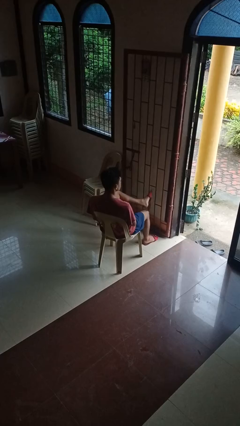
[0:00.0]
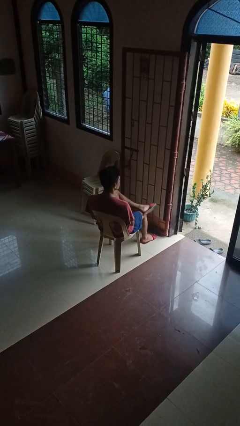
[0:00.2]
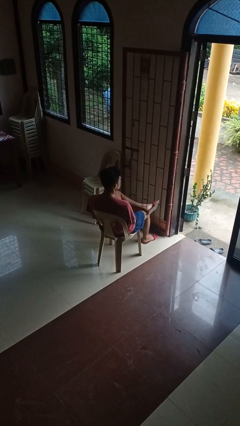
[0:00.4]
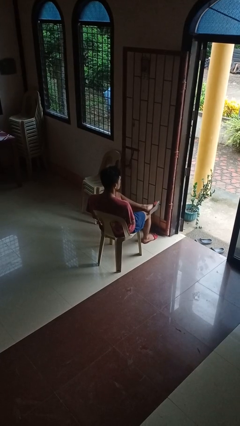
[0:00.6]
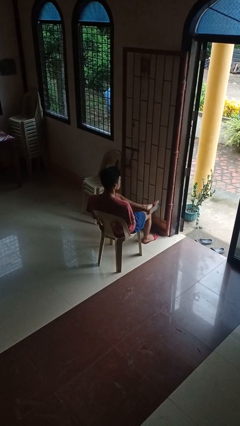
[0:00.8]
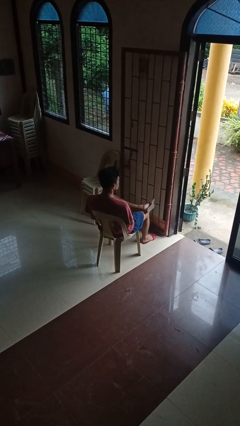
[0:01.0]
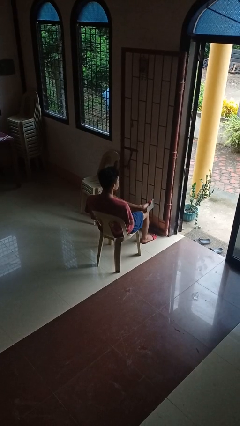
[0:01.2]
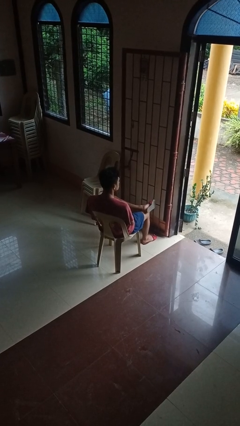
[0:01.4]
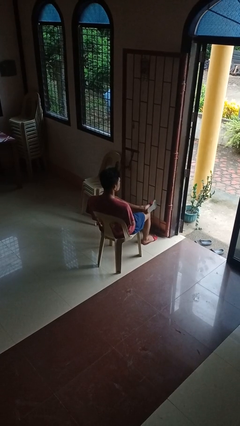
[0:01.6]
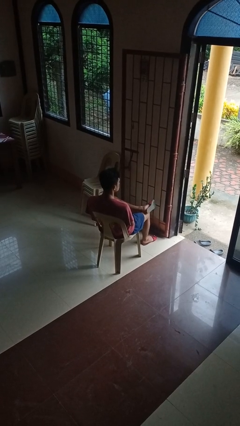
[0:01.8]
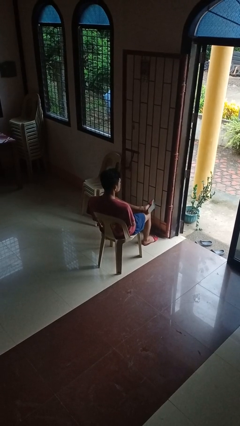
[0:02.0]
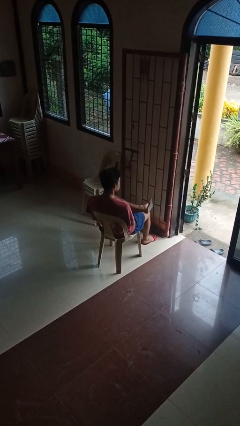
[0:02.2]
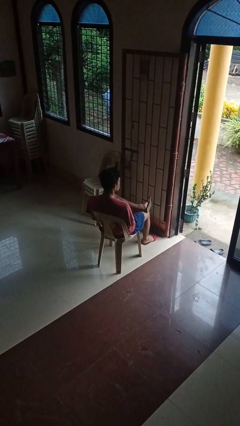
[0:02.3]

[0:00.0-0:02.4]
person crosses legs

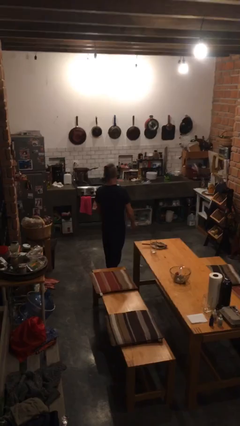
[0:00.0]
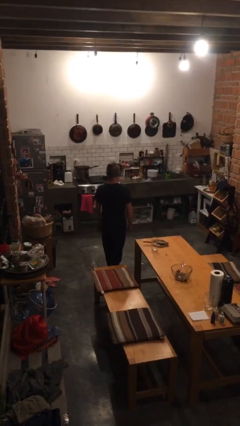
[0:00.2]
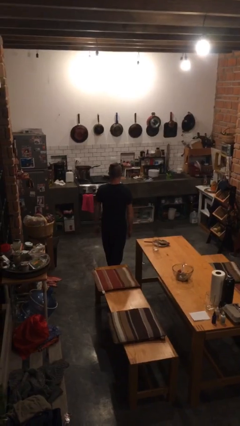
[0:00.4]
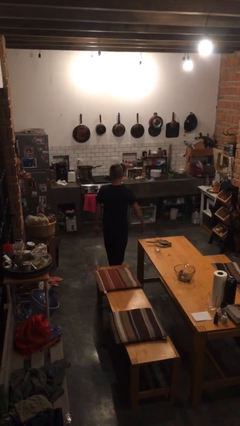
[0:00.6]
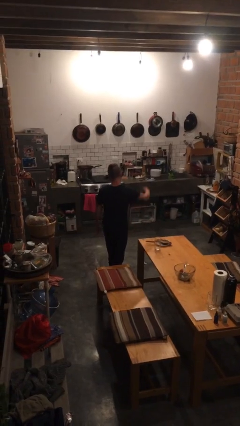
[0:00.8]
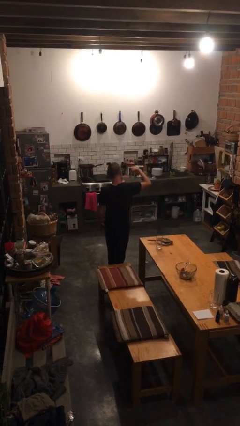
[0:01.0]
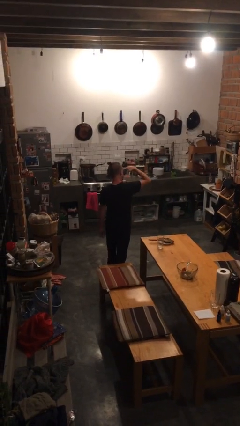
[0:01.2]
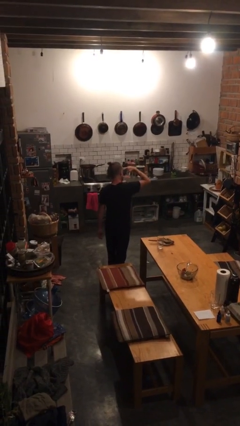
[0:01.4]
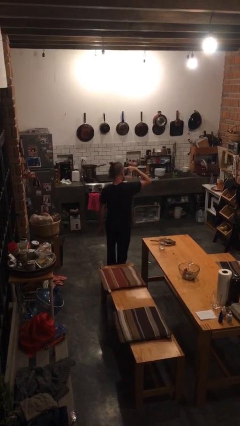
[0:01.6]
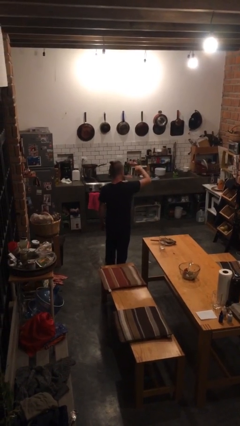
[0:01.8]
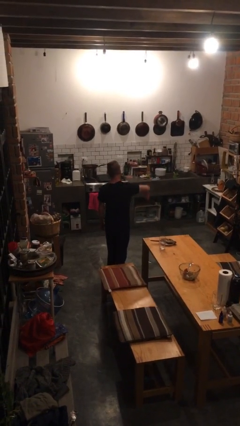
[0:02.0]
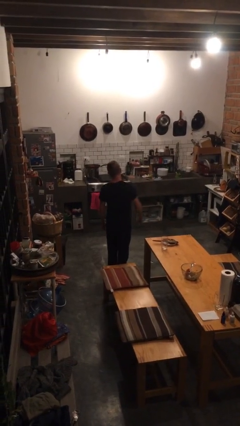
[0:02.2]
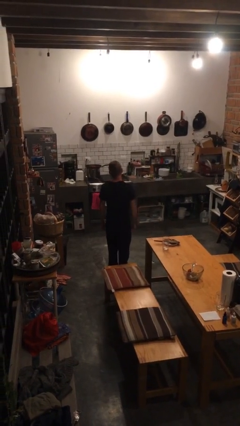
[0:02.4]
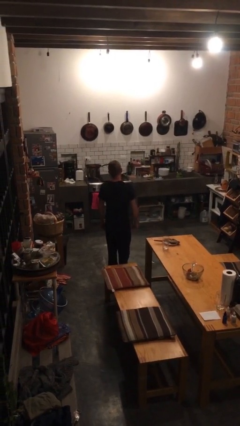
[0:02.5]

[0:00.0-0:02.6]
person salutes

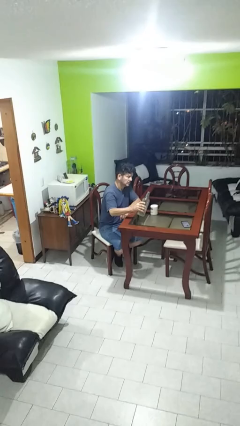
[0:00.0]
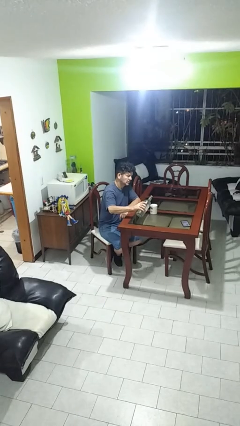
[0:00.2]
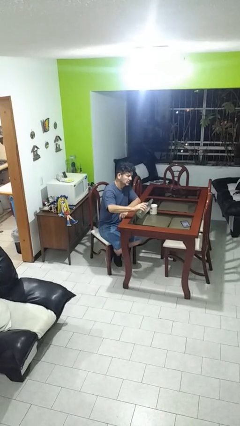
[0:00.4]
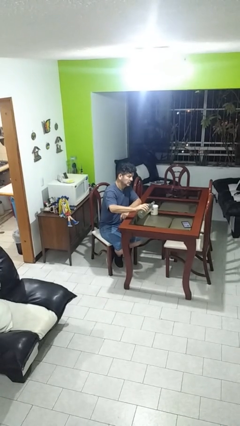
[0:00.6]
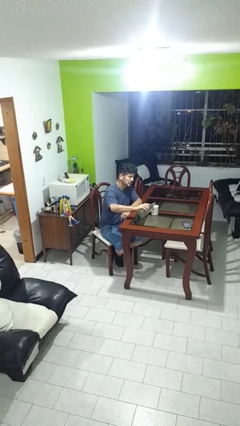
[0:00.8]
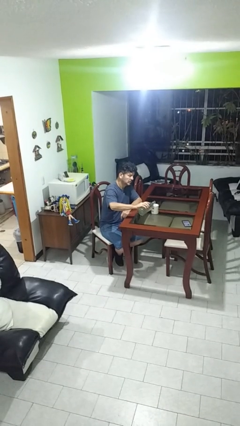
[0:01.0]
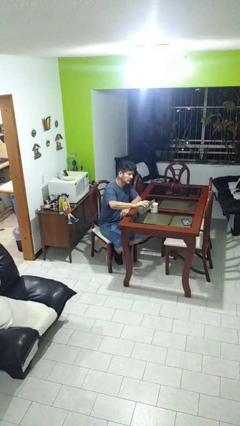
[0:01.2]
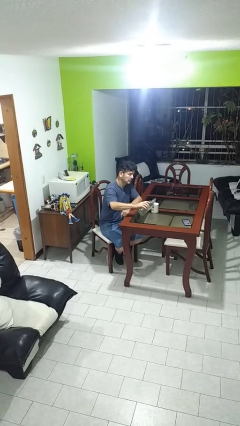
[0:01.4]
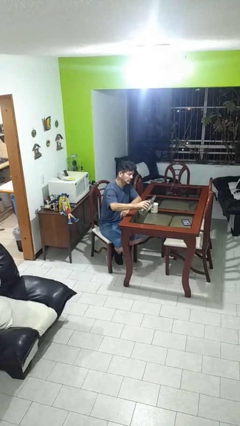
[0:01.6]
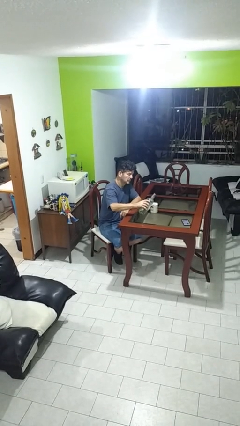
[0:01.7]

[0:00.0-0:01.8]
person pours liquid into cup

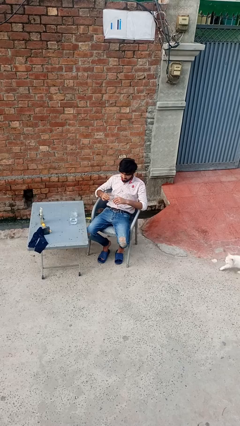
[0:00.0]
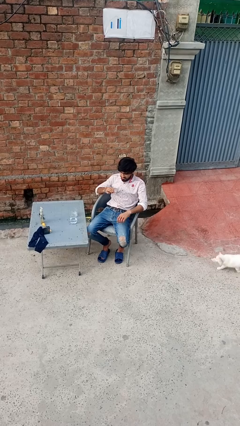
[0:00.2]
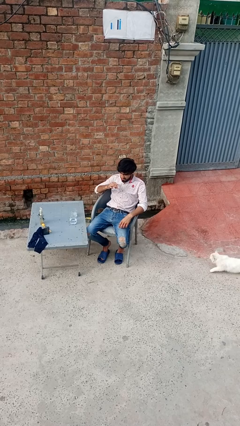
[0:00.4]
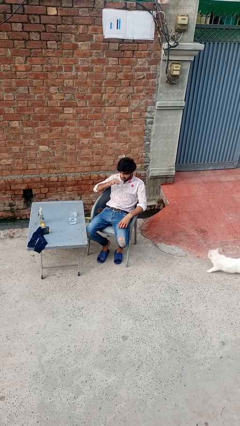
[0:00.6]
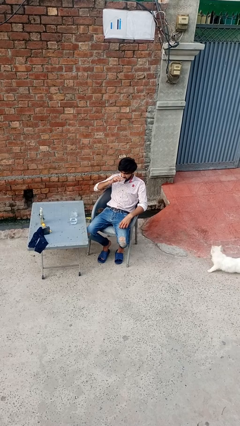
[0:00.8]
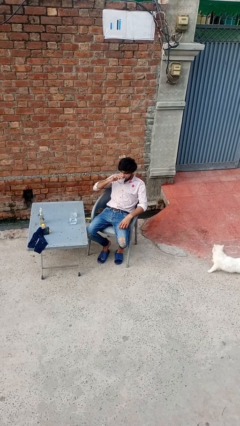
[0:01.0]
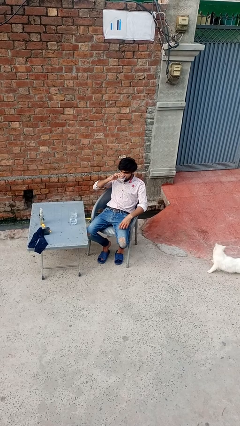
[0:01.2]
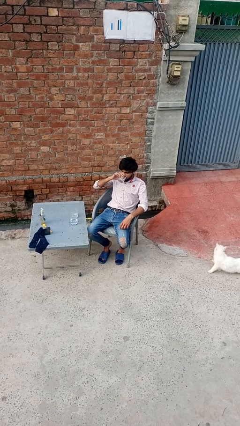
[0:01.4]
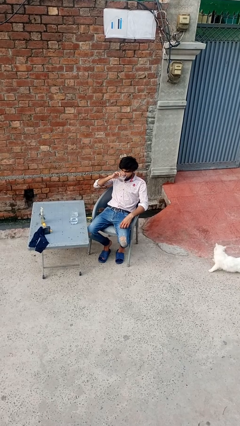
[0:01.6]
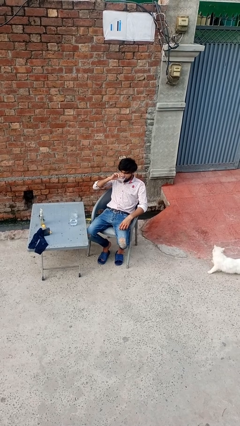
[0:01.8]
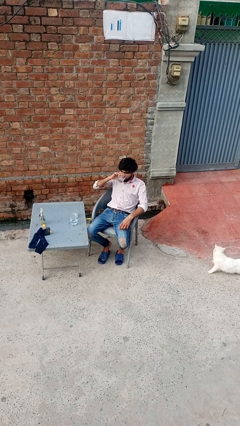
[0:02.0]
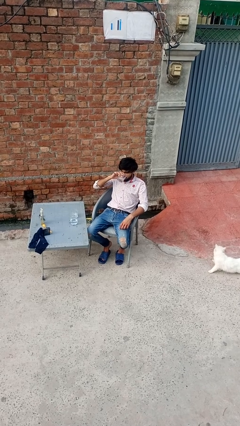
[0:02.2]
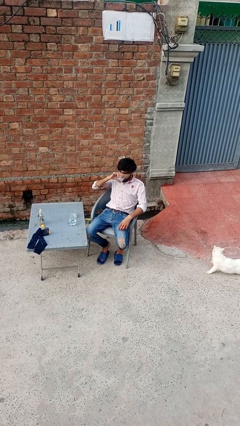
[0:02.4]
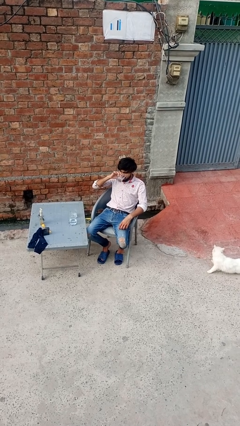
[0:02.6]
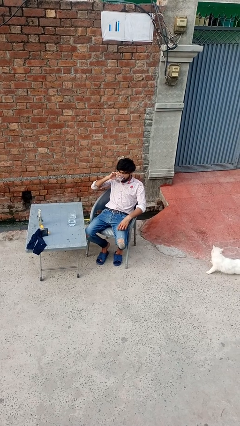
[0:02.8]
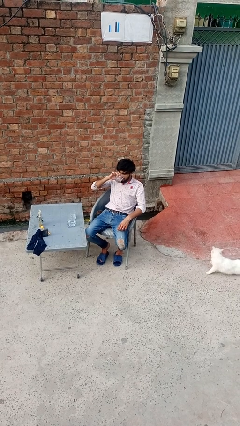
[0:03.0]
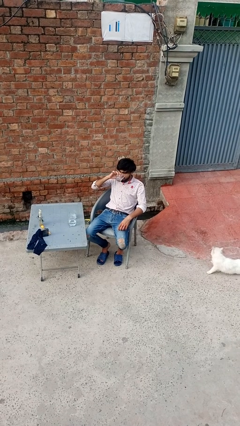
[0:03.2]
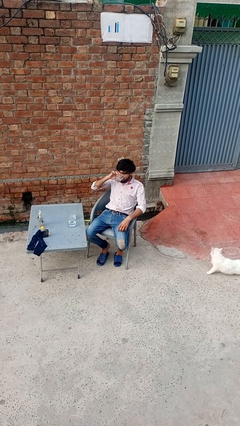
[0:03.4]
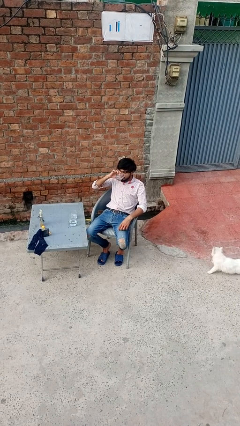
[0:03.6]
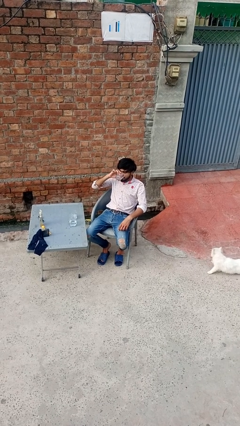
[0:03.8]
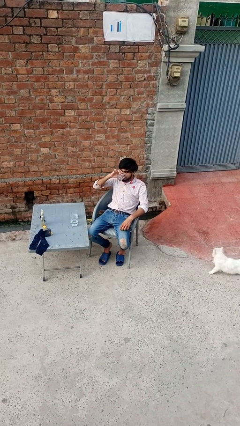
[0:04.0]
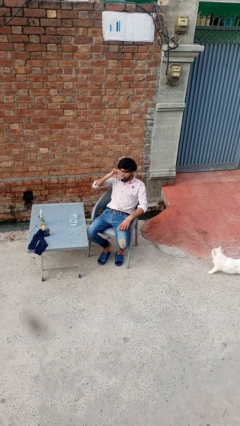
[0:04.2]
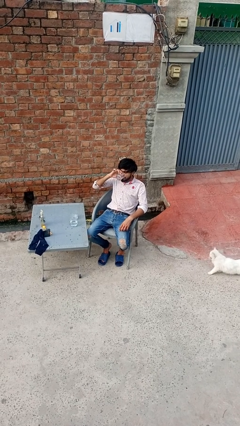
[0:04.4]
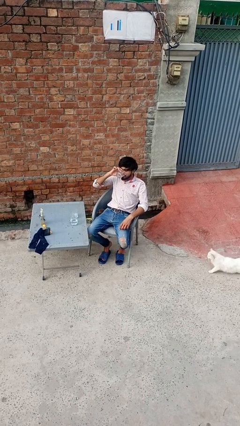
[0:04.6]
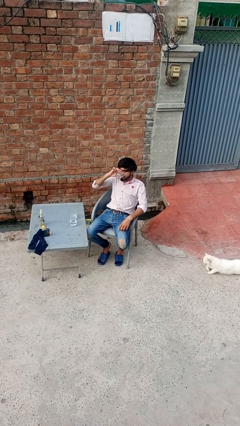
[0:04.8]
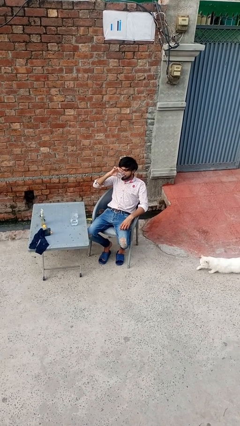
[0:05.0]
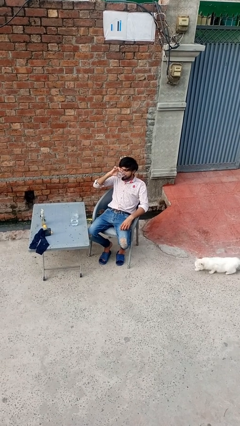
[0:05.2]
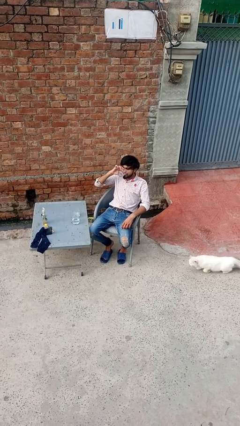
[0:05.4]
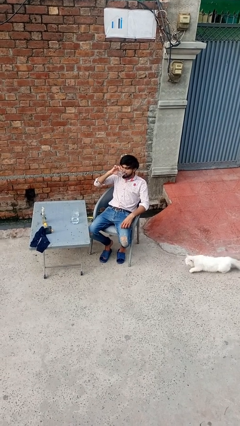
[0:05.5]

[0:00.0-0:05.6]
person drinks from shotglass

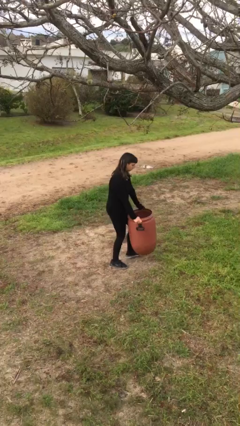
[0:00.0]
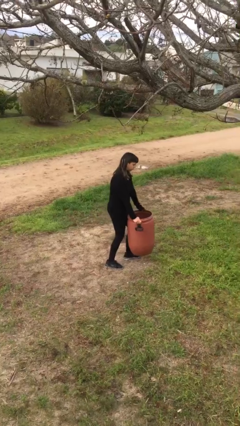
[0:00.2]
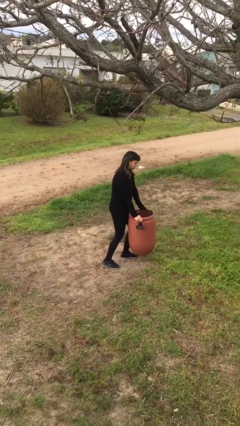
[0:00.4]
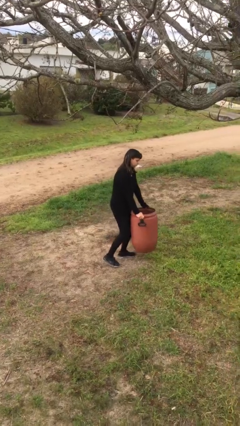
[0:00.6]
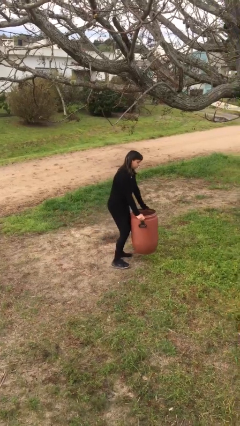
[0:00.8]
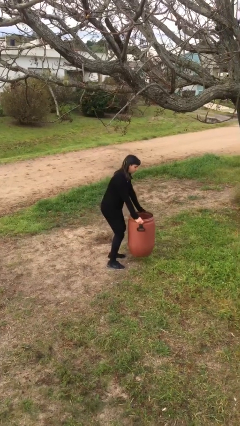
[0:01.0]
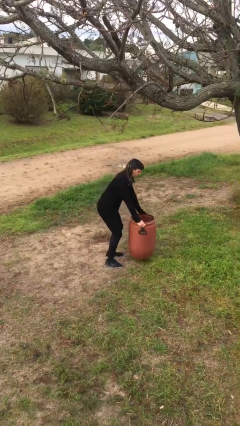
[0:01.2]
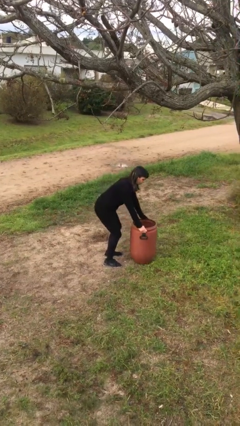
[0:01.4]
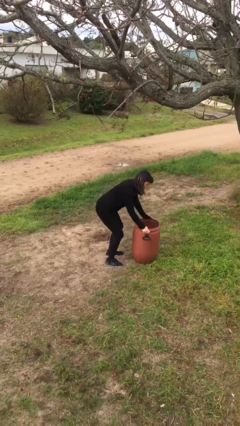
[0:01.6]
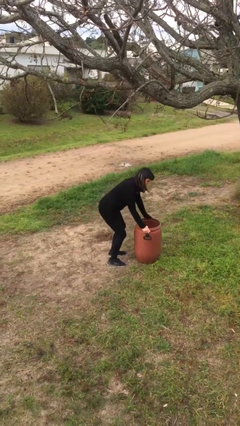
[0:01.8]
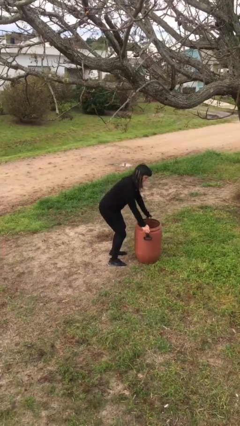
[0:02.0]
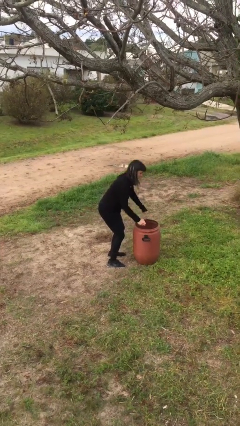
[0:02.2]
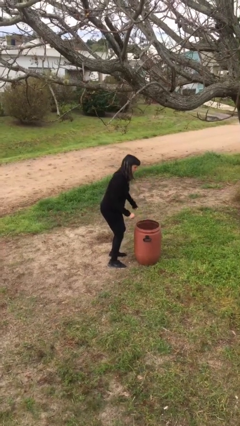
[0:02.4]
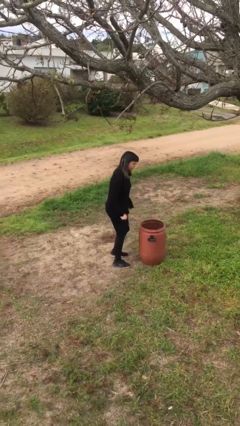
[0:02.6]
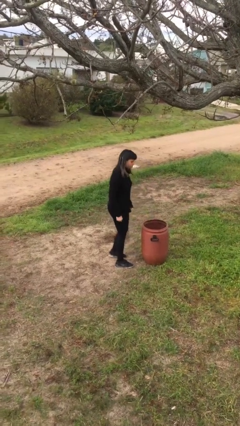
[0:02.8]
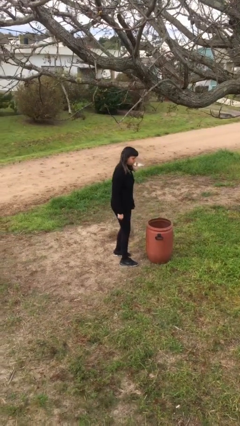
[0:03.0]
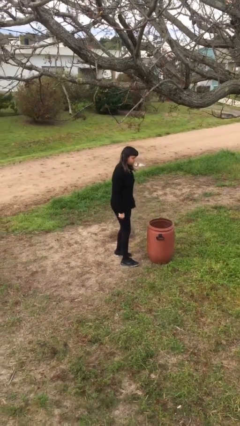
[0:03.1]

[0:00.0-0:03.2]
person puts down object on floor

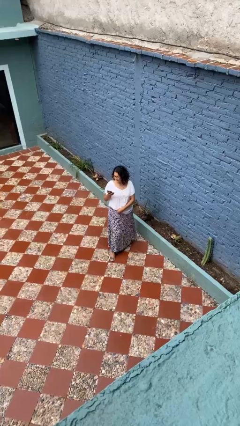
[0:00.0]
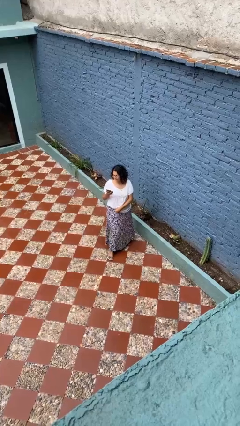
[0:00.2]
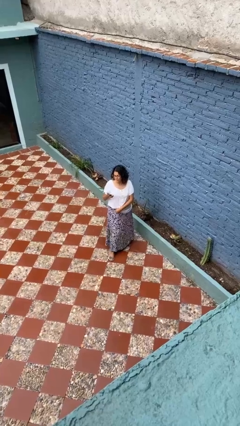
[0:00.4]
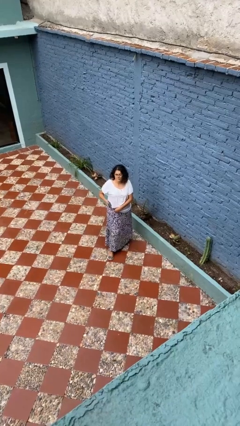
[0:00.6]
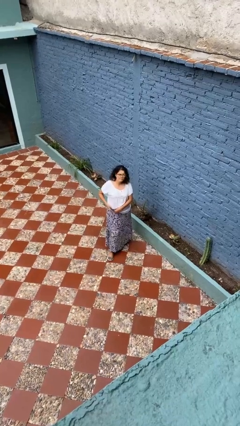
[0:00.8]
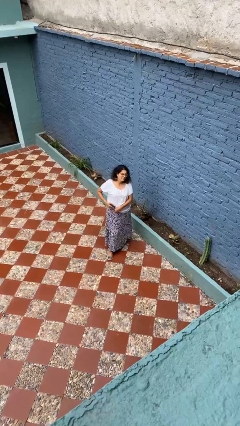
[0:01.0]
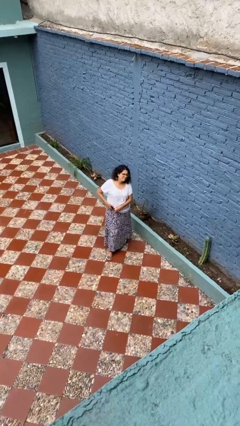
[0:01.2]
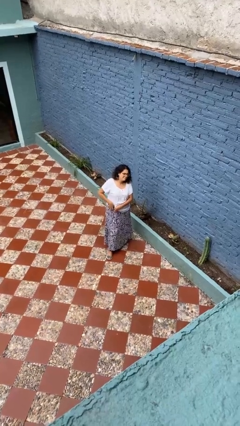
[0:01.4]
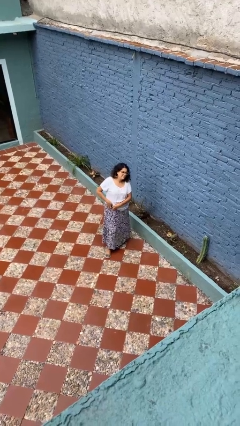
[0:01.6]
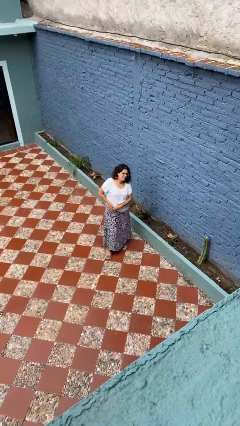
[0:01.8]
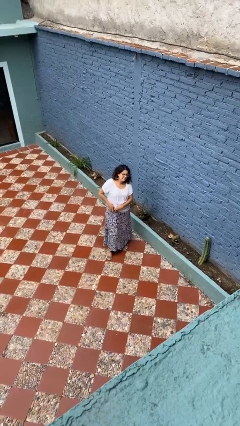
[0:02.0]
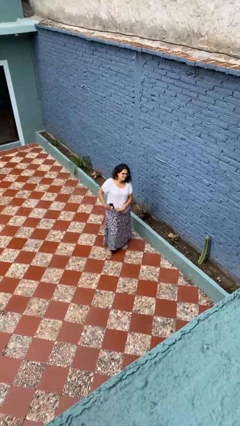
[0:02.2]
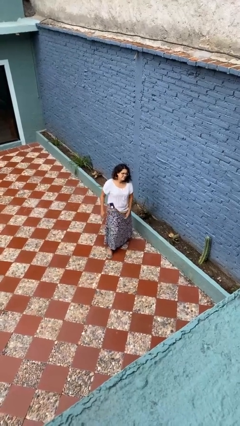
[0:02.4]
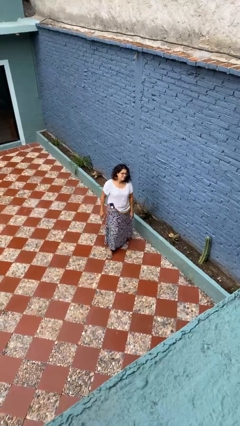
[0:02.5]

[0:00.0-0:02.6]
person puts phone into pocket
